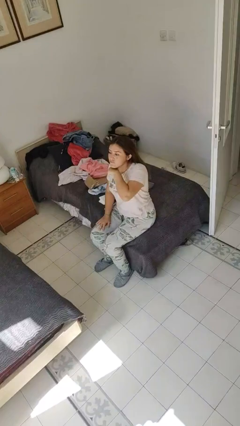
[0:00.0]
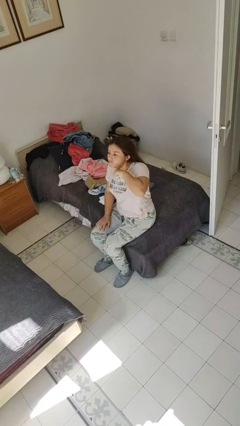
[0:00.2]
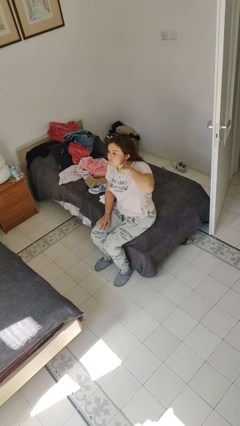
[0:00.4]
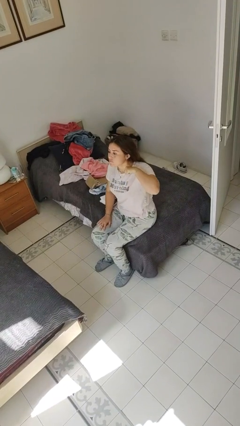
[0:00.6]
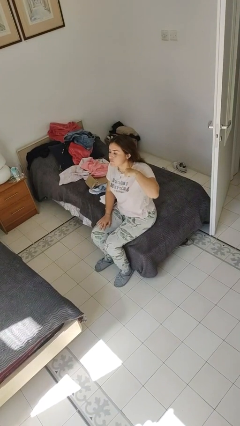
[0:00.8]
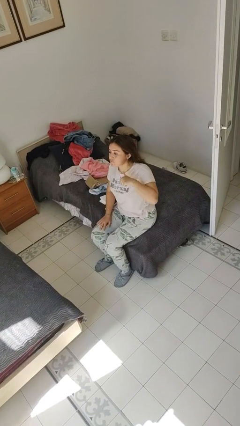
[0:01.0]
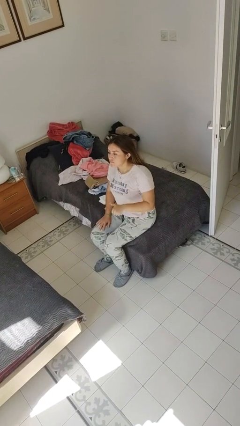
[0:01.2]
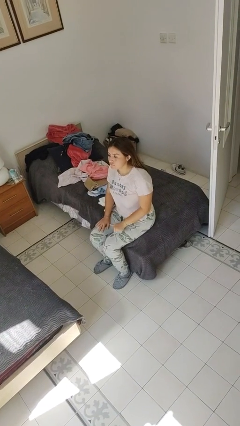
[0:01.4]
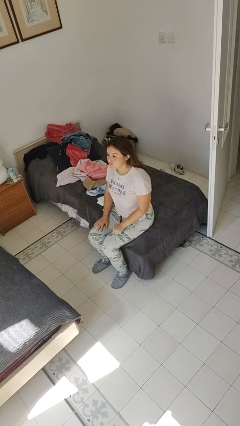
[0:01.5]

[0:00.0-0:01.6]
person gestures cut

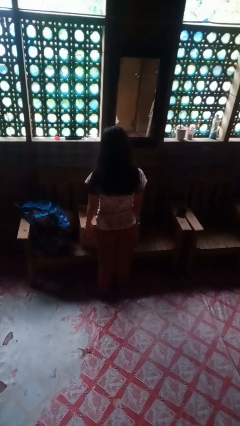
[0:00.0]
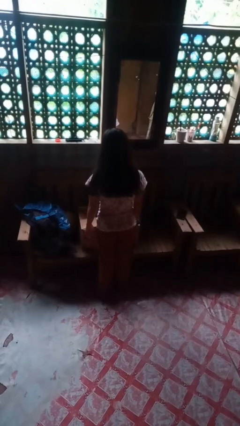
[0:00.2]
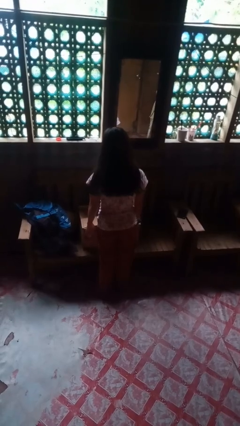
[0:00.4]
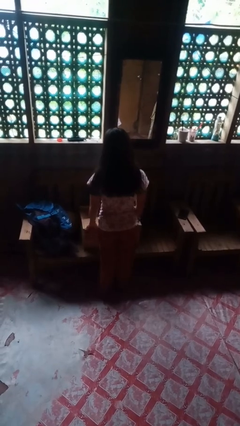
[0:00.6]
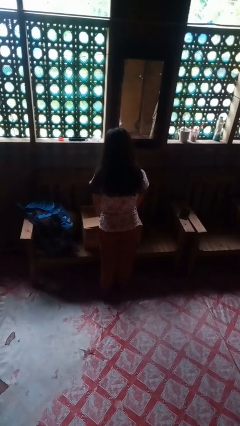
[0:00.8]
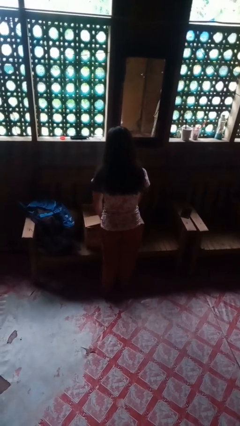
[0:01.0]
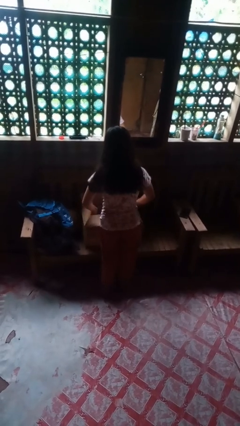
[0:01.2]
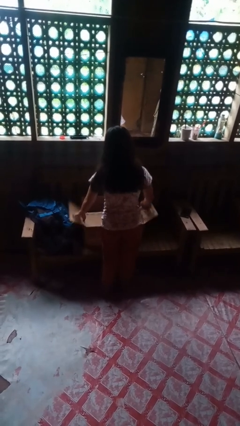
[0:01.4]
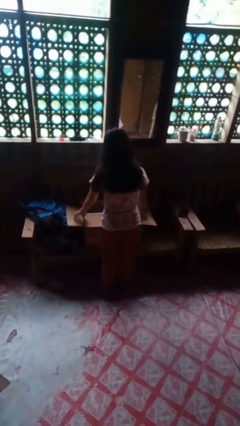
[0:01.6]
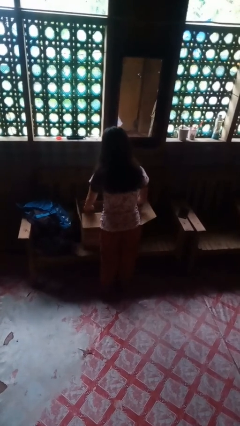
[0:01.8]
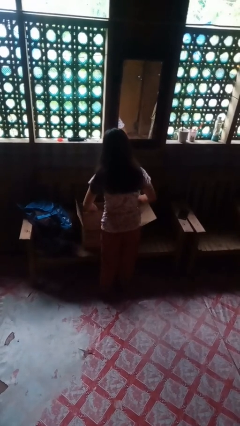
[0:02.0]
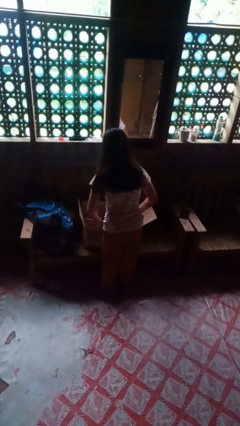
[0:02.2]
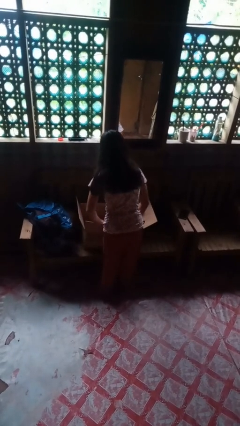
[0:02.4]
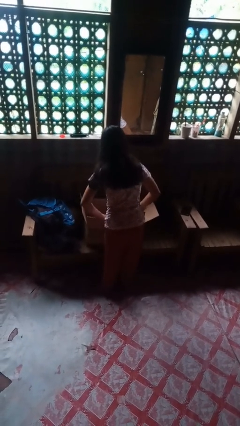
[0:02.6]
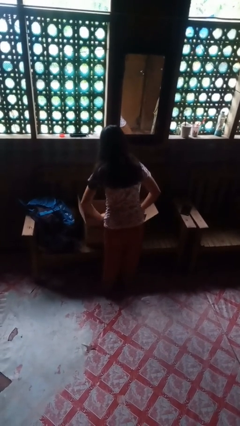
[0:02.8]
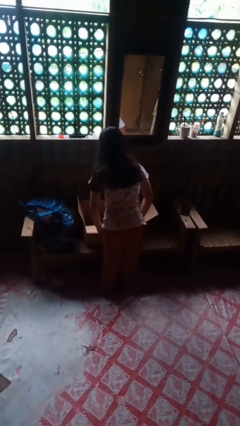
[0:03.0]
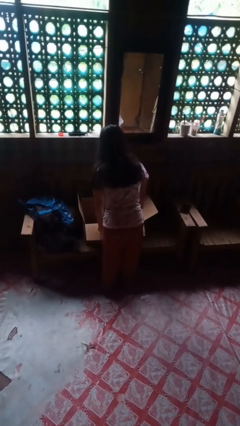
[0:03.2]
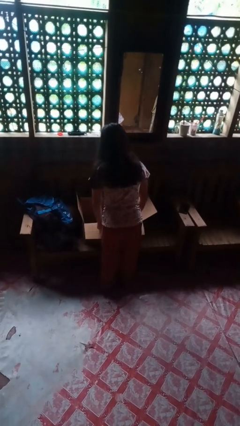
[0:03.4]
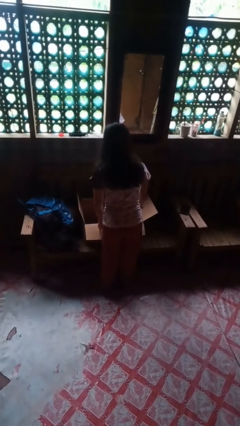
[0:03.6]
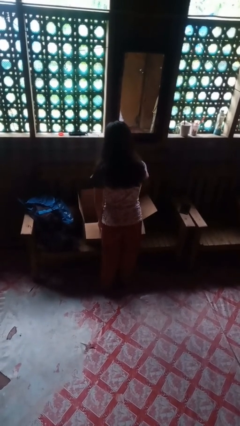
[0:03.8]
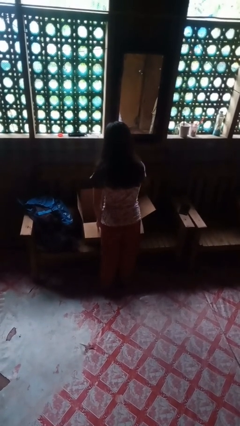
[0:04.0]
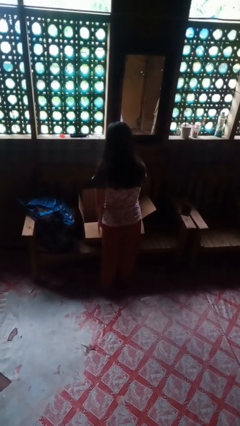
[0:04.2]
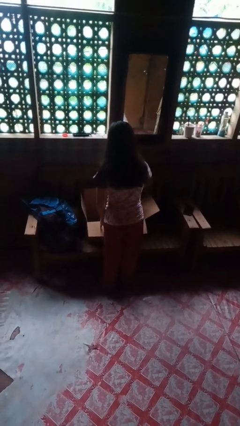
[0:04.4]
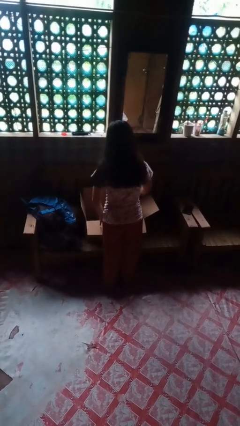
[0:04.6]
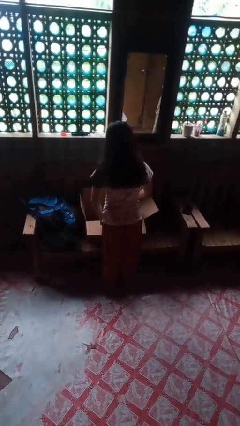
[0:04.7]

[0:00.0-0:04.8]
person opens box

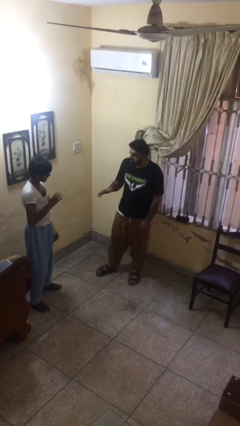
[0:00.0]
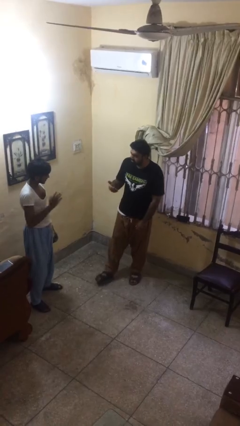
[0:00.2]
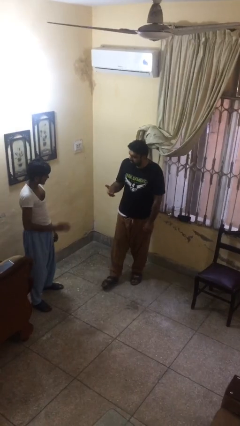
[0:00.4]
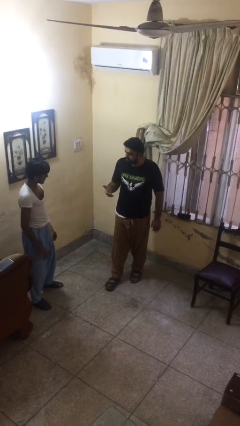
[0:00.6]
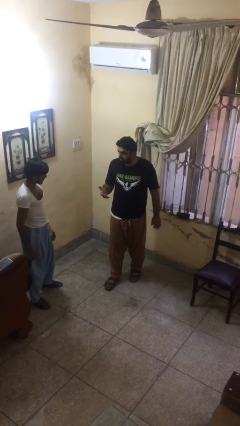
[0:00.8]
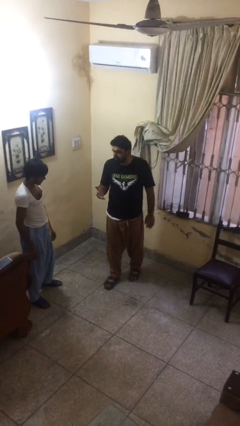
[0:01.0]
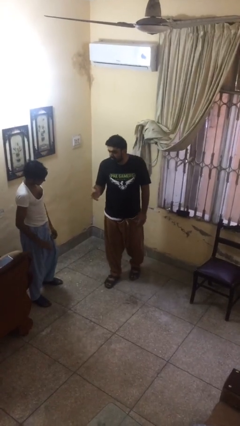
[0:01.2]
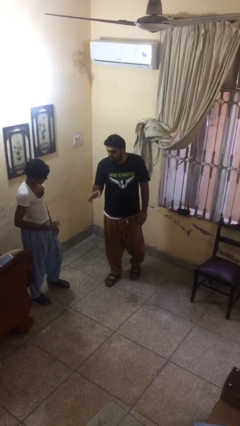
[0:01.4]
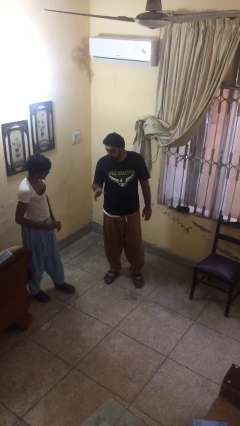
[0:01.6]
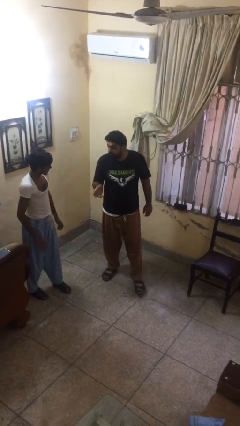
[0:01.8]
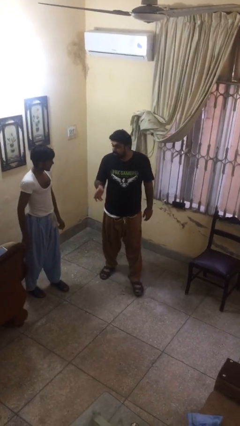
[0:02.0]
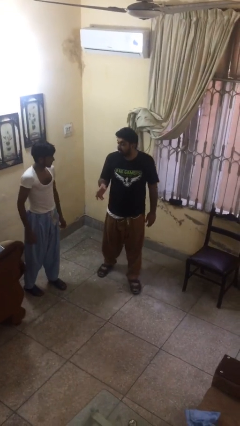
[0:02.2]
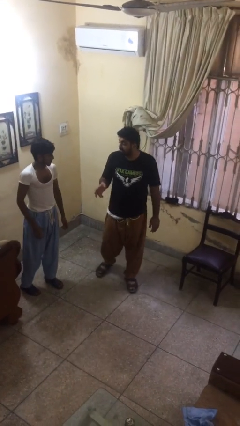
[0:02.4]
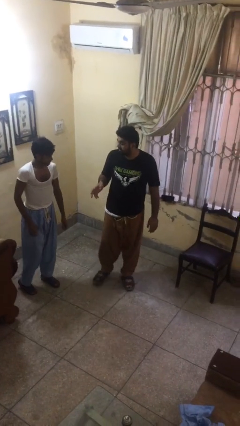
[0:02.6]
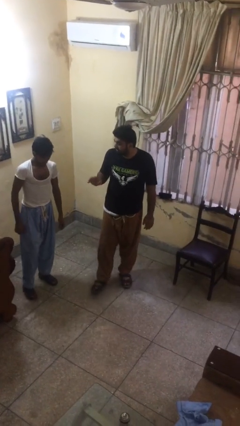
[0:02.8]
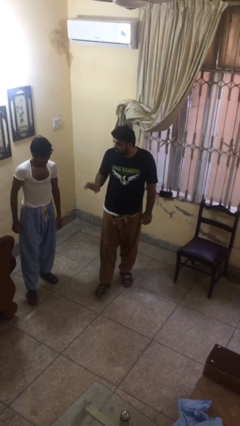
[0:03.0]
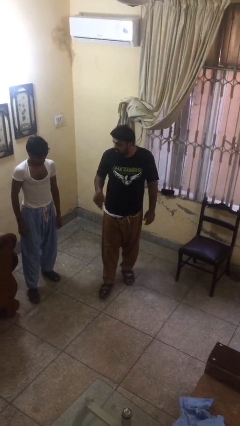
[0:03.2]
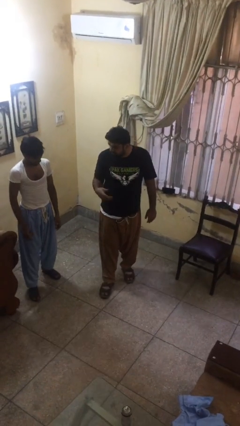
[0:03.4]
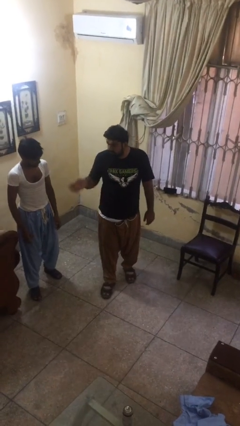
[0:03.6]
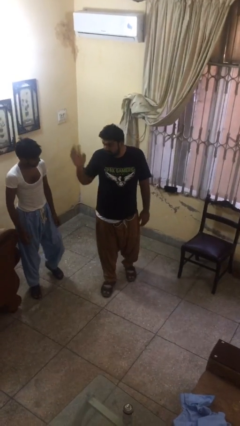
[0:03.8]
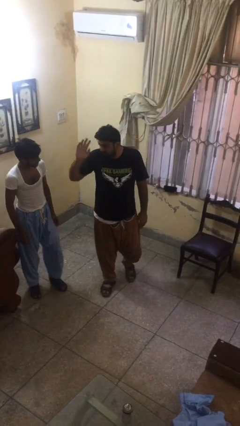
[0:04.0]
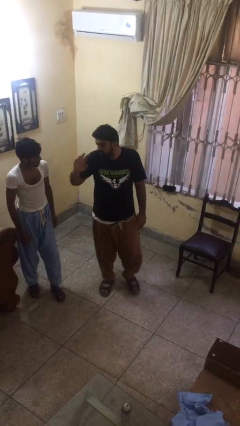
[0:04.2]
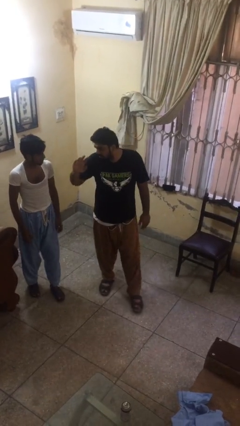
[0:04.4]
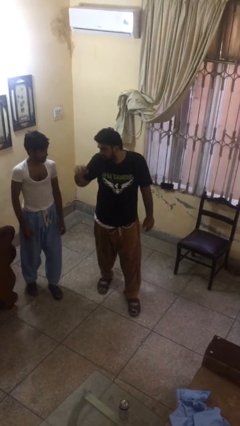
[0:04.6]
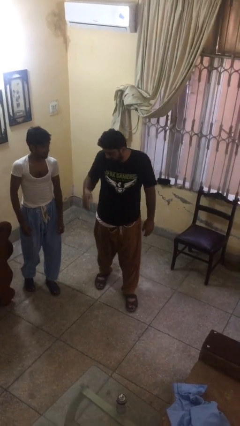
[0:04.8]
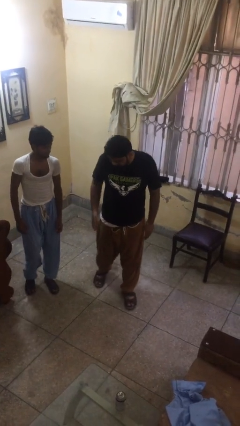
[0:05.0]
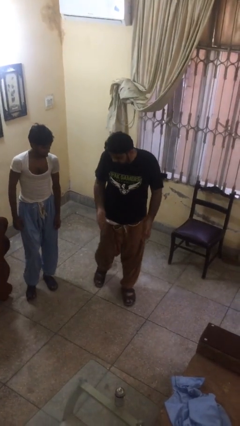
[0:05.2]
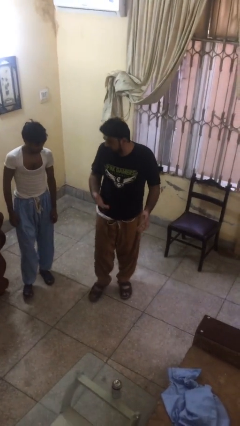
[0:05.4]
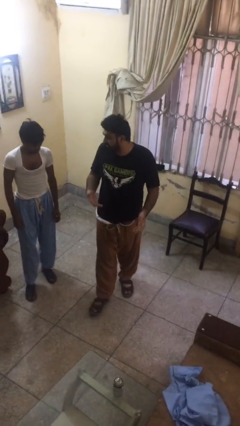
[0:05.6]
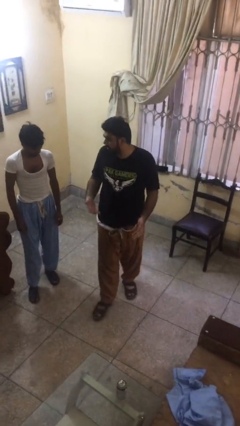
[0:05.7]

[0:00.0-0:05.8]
person talks to person

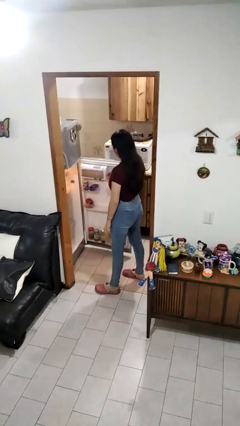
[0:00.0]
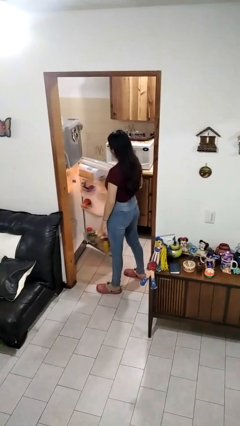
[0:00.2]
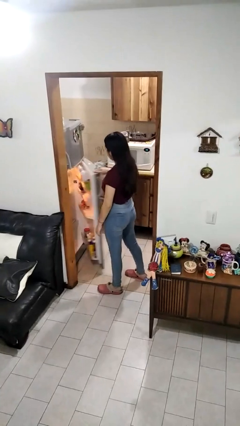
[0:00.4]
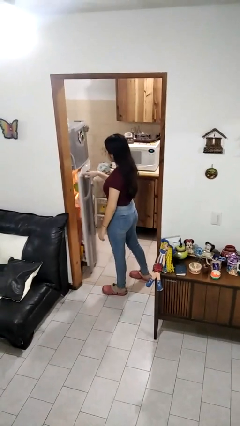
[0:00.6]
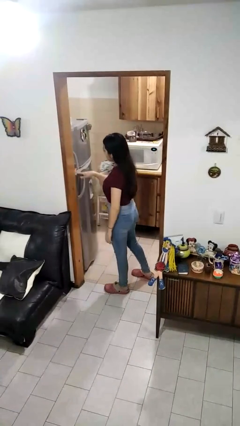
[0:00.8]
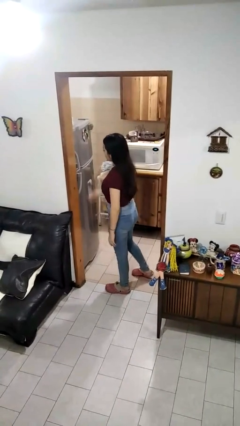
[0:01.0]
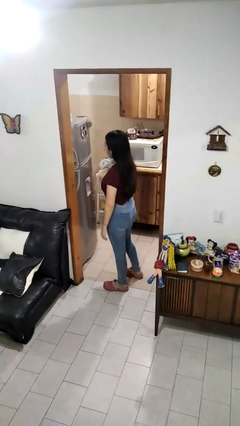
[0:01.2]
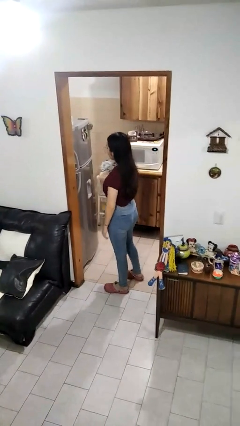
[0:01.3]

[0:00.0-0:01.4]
person closes refrigerator

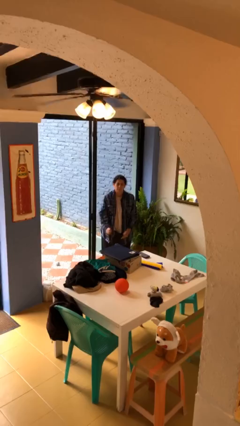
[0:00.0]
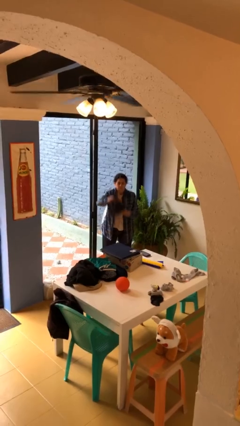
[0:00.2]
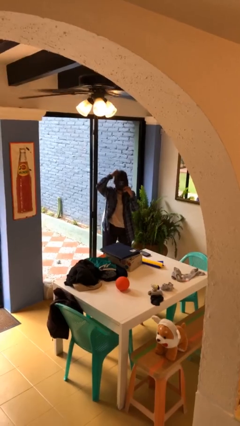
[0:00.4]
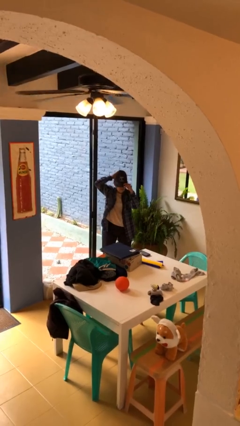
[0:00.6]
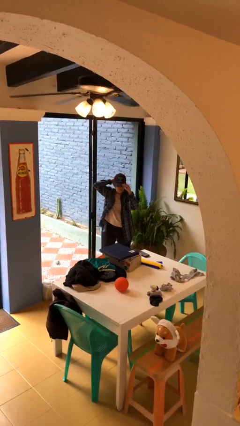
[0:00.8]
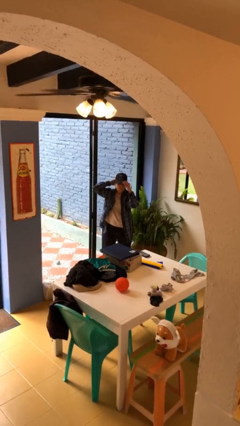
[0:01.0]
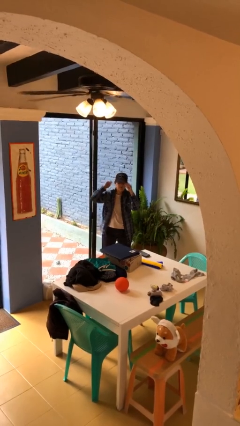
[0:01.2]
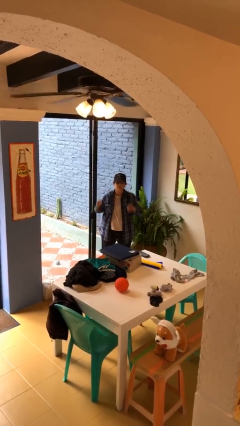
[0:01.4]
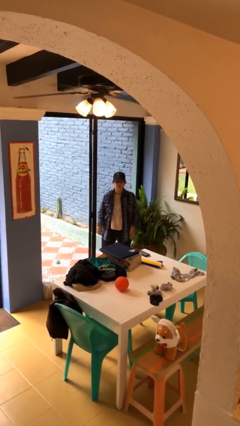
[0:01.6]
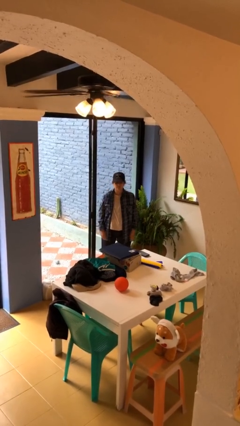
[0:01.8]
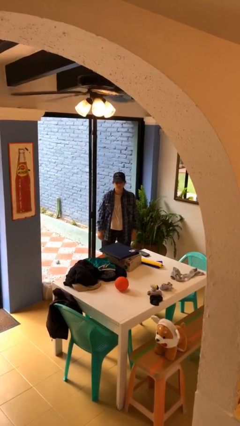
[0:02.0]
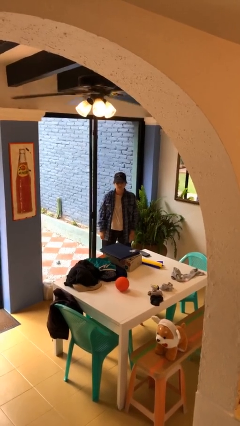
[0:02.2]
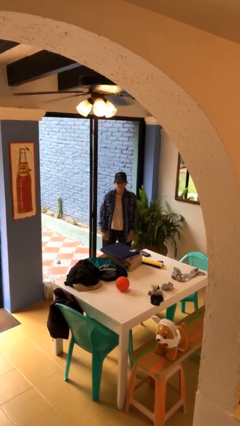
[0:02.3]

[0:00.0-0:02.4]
person puts on hat

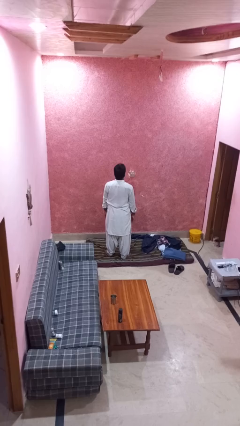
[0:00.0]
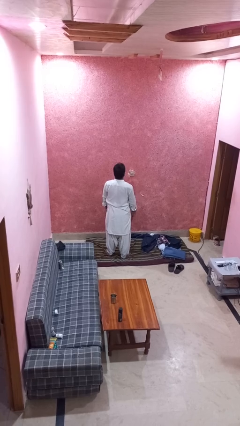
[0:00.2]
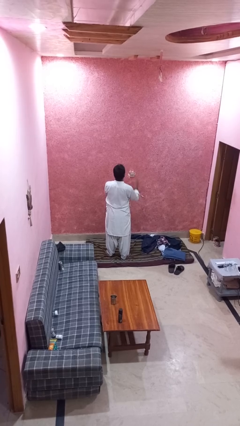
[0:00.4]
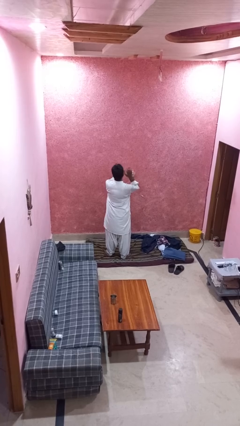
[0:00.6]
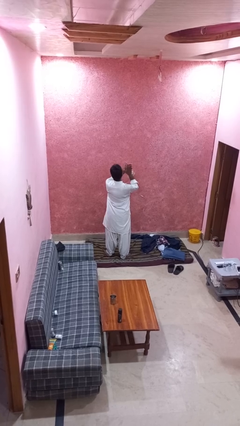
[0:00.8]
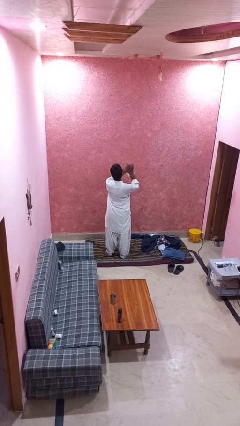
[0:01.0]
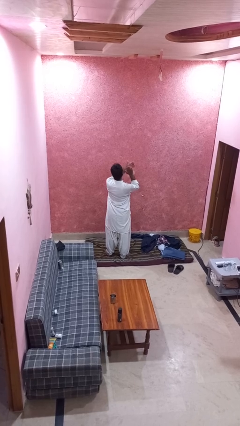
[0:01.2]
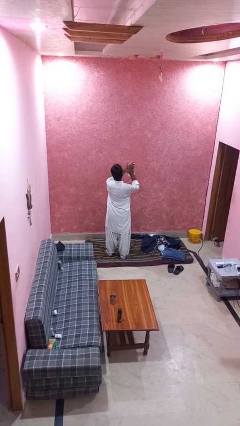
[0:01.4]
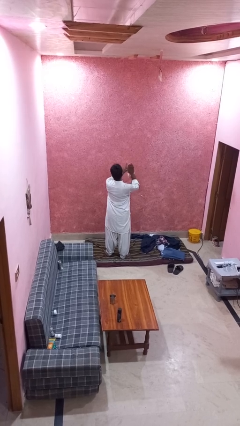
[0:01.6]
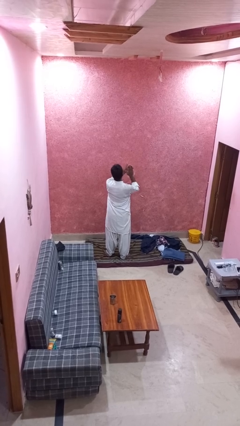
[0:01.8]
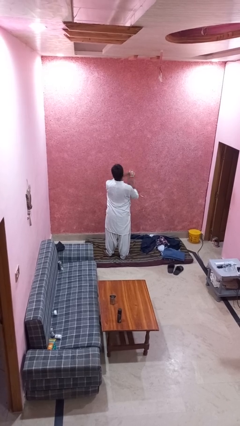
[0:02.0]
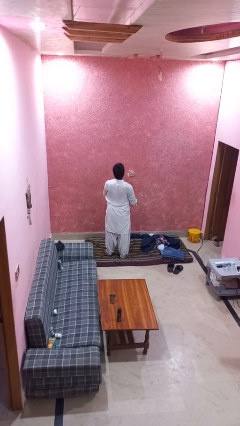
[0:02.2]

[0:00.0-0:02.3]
person claps hands
